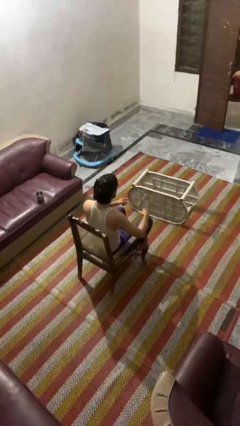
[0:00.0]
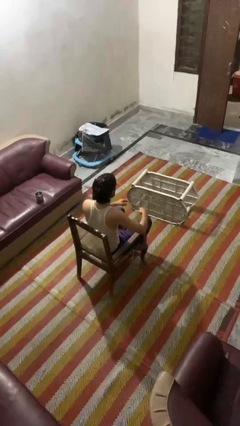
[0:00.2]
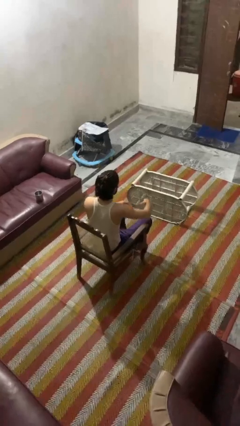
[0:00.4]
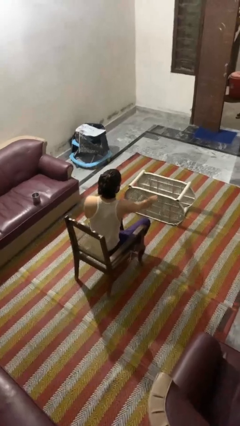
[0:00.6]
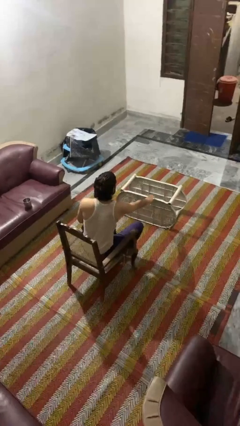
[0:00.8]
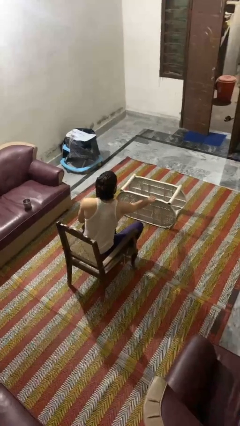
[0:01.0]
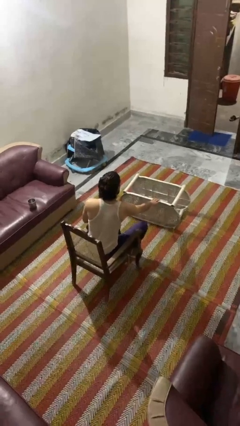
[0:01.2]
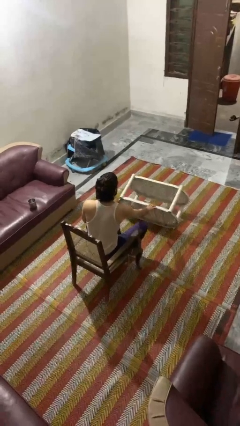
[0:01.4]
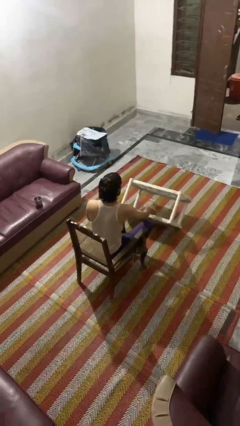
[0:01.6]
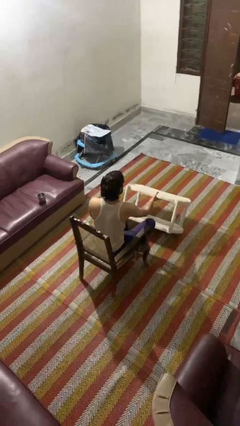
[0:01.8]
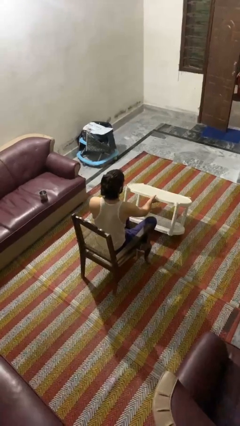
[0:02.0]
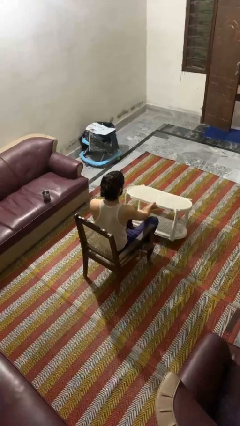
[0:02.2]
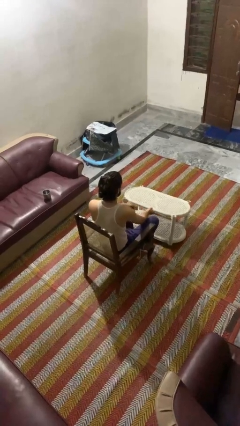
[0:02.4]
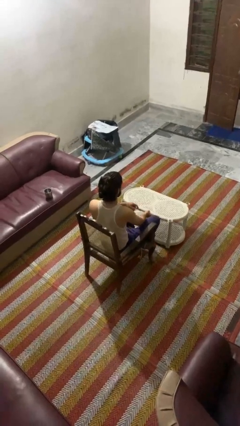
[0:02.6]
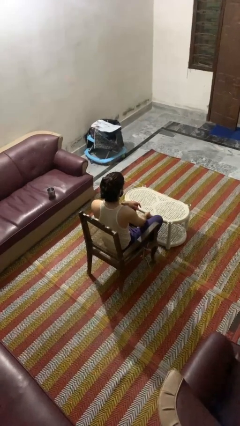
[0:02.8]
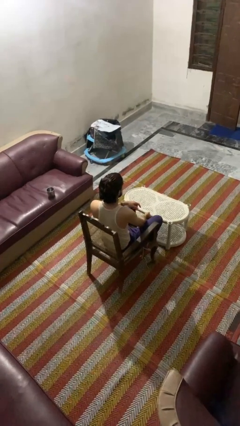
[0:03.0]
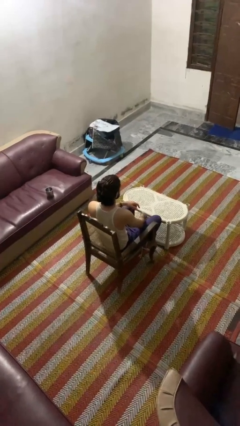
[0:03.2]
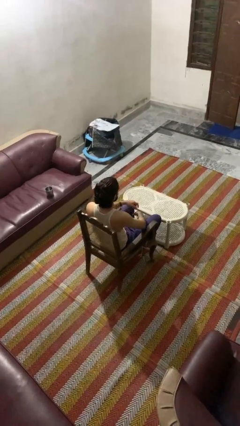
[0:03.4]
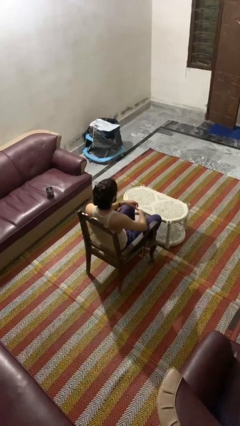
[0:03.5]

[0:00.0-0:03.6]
person sets upright furniture

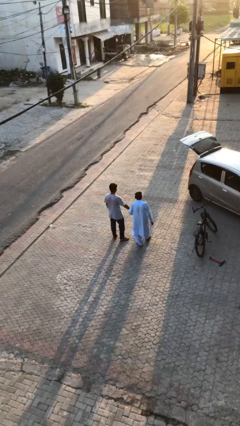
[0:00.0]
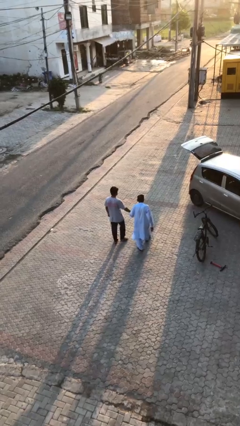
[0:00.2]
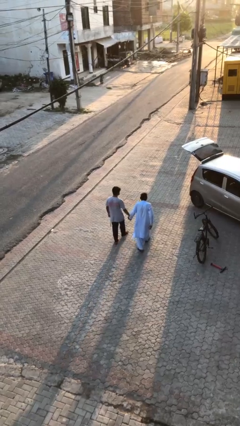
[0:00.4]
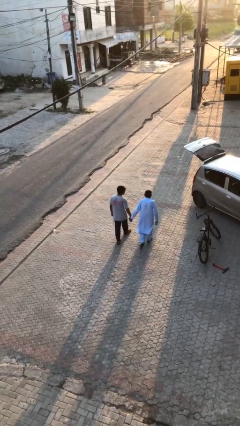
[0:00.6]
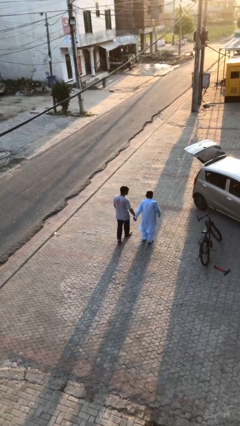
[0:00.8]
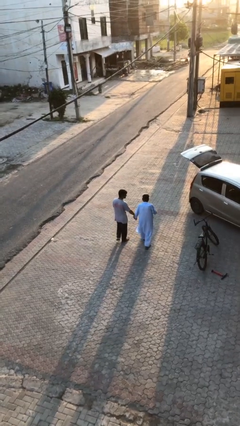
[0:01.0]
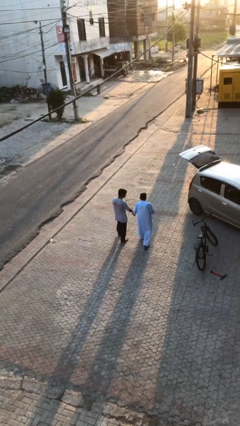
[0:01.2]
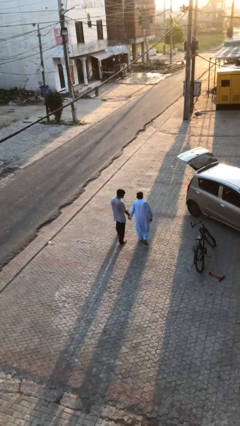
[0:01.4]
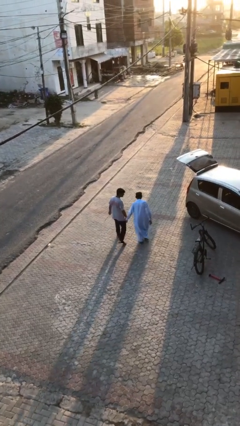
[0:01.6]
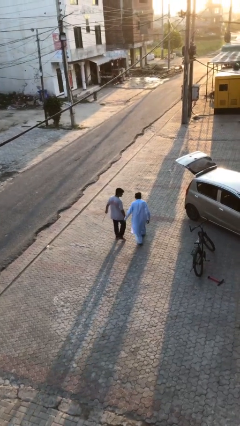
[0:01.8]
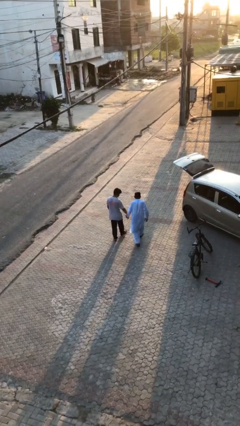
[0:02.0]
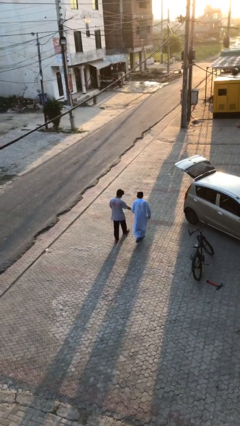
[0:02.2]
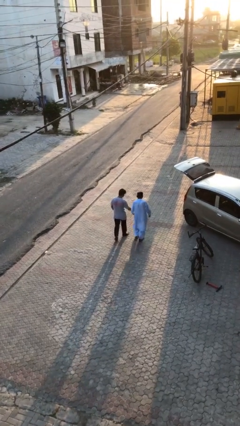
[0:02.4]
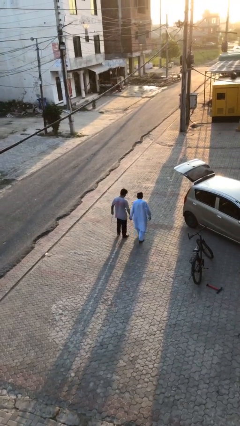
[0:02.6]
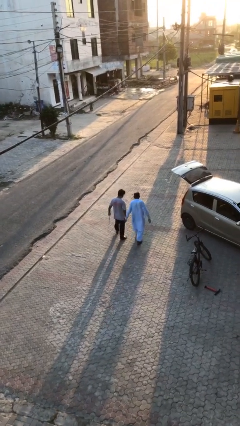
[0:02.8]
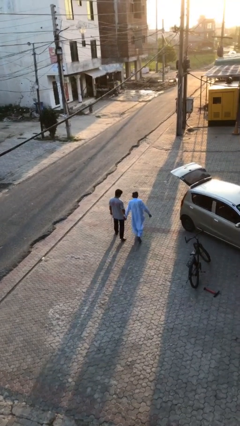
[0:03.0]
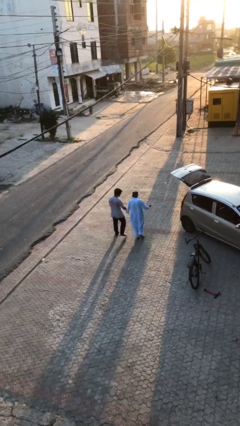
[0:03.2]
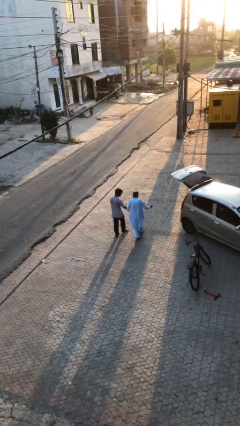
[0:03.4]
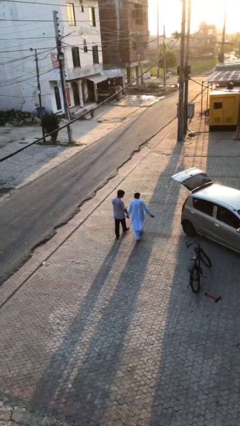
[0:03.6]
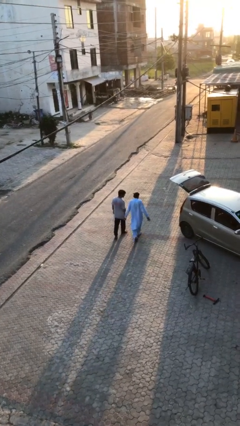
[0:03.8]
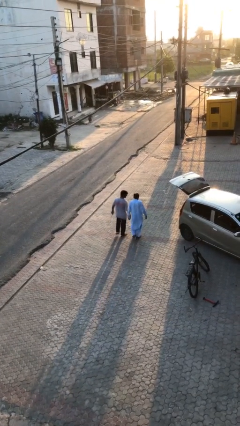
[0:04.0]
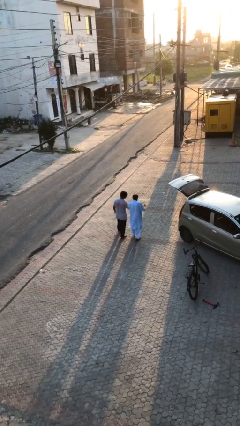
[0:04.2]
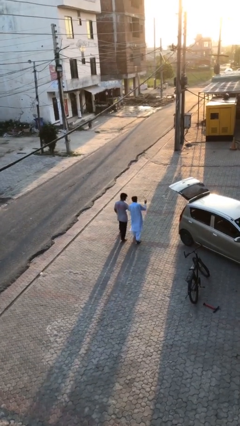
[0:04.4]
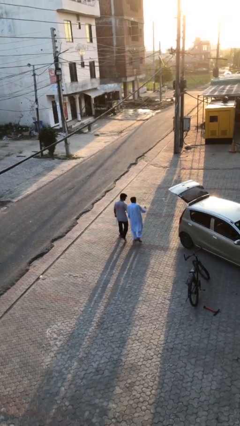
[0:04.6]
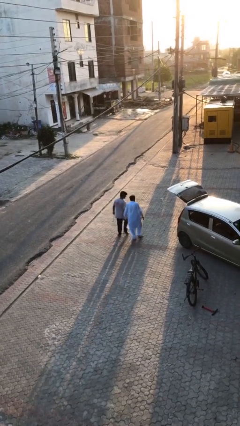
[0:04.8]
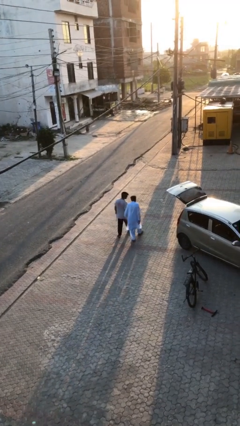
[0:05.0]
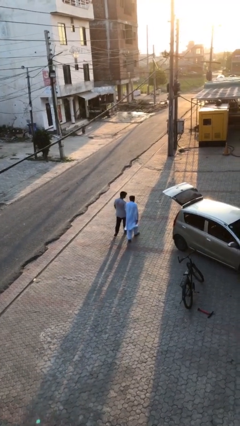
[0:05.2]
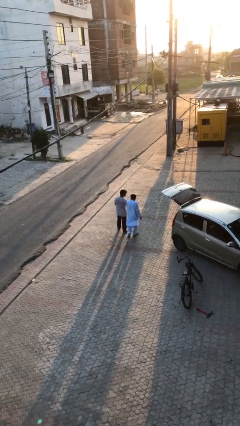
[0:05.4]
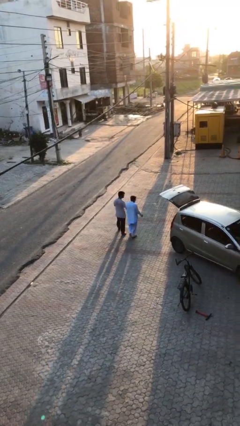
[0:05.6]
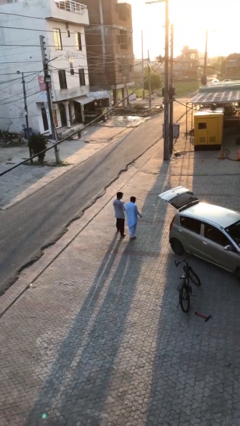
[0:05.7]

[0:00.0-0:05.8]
person holds hand

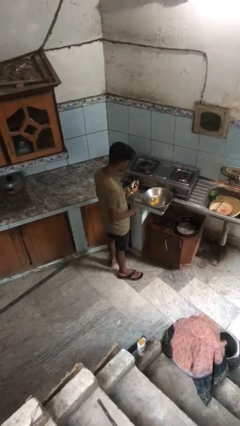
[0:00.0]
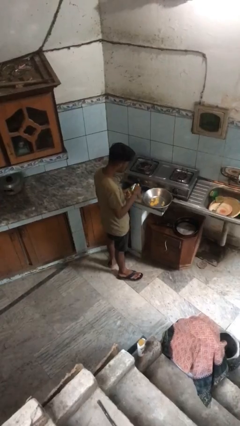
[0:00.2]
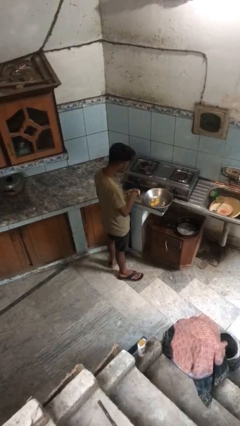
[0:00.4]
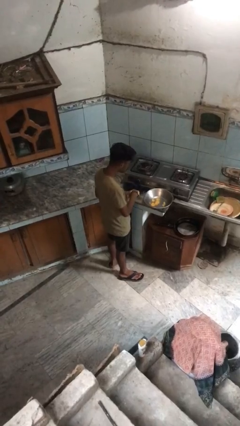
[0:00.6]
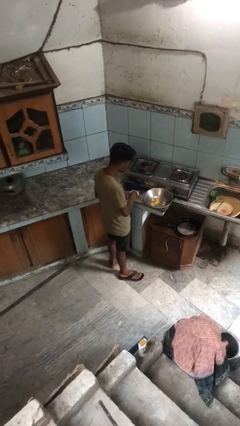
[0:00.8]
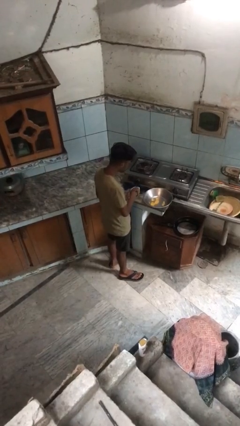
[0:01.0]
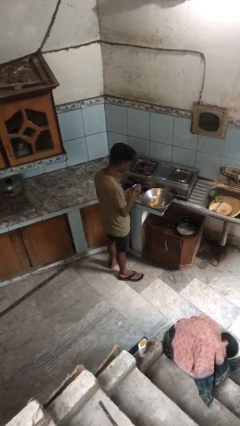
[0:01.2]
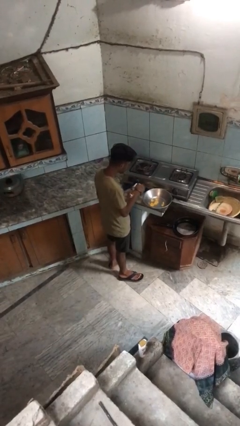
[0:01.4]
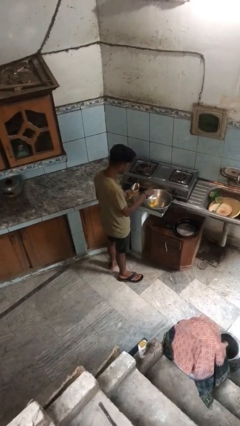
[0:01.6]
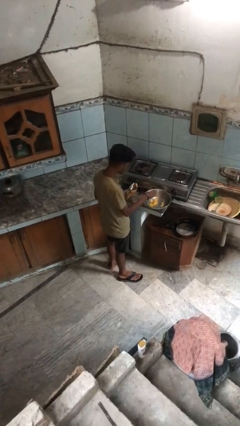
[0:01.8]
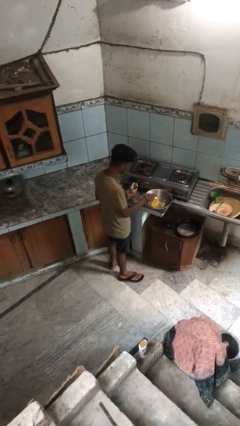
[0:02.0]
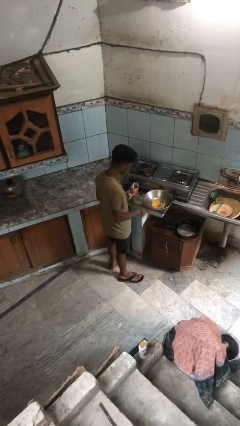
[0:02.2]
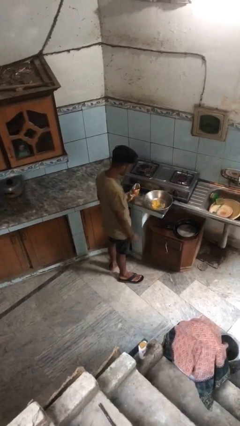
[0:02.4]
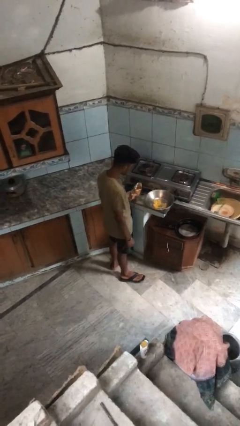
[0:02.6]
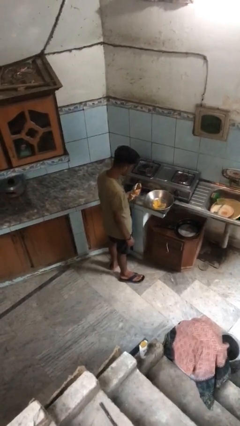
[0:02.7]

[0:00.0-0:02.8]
person pours into bowl

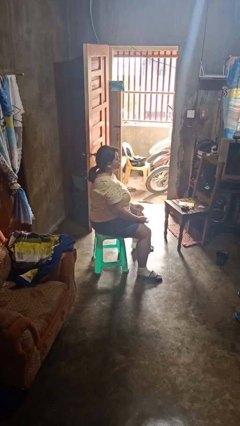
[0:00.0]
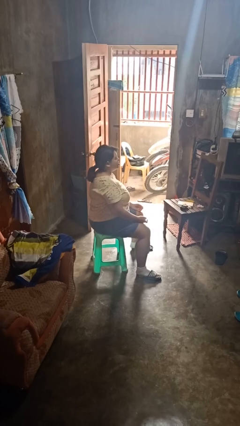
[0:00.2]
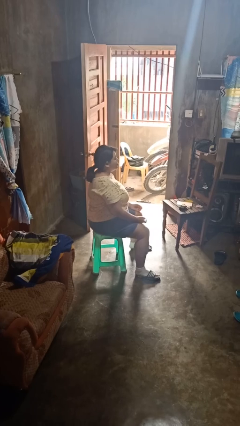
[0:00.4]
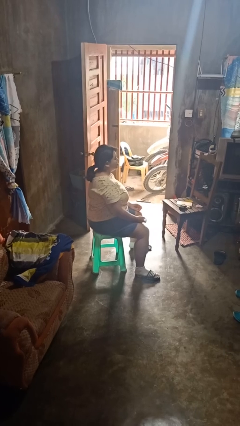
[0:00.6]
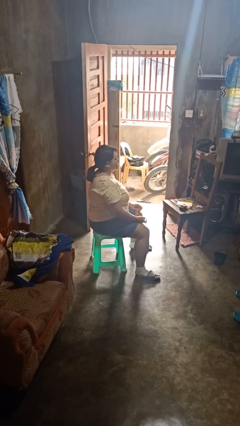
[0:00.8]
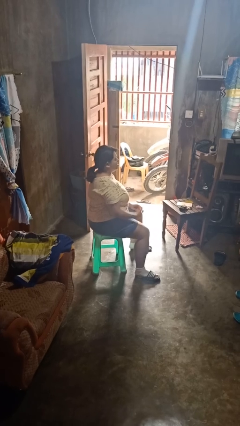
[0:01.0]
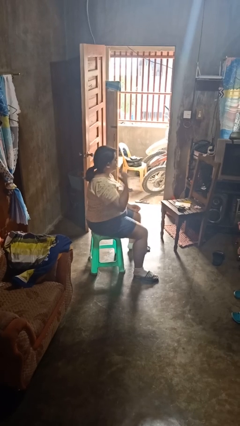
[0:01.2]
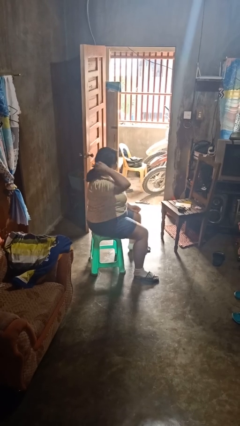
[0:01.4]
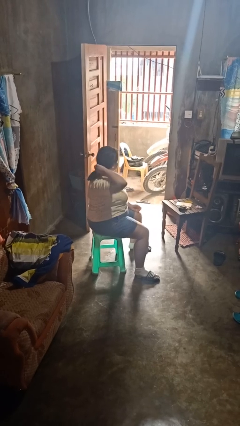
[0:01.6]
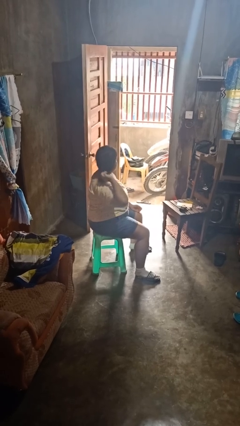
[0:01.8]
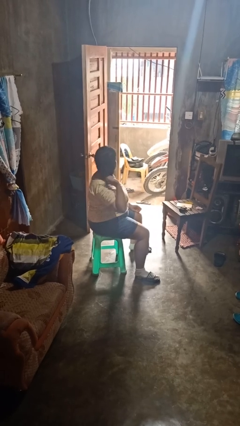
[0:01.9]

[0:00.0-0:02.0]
person takes off hairtie

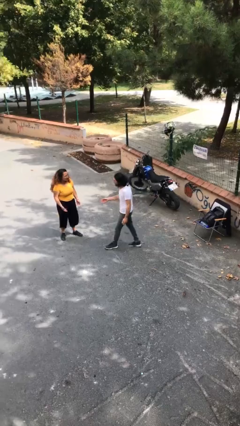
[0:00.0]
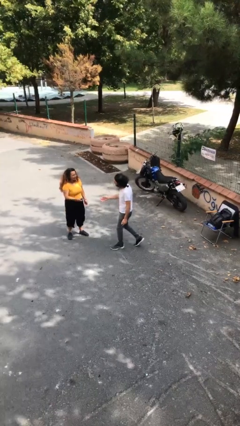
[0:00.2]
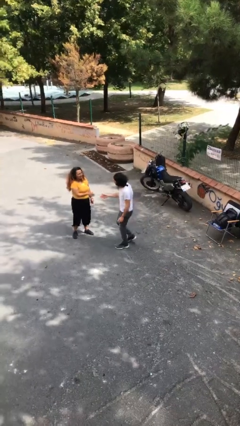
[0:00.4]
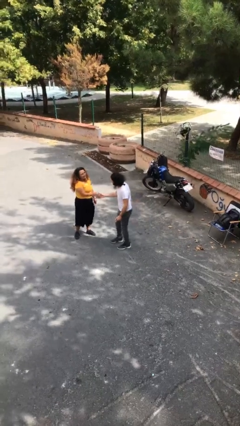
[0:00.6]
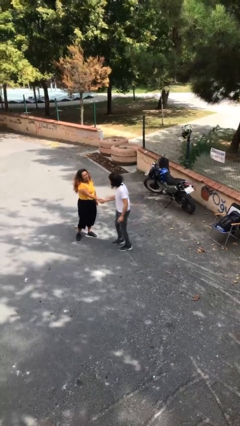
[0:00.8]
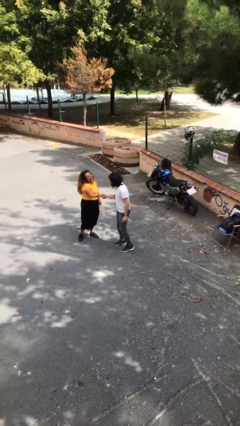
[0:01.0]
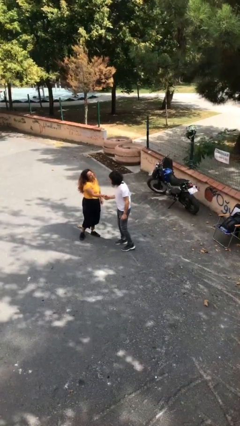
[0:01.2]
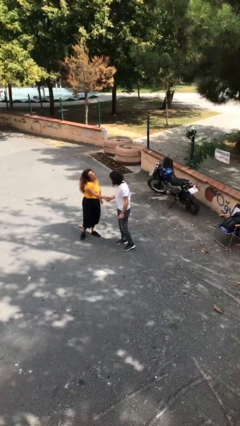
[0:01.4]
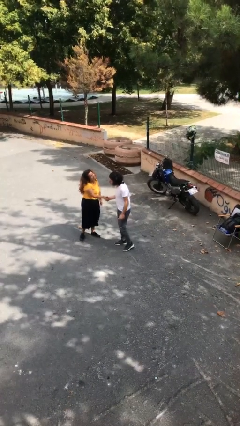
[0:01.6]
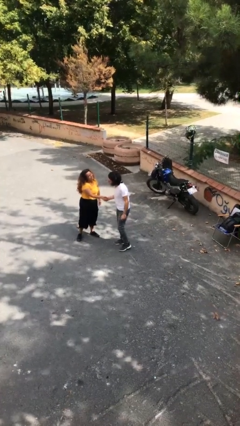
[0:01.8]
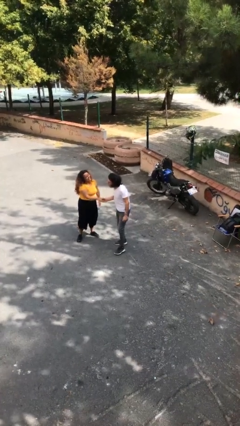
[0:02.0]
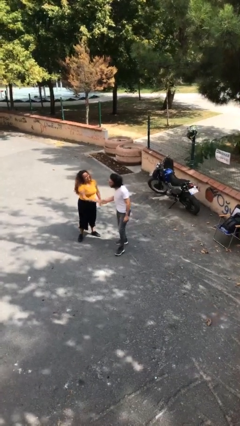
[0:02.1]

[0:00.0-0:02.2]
person shakes hand

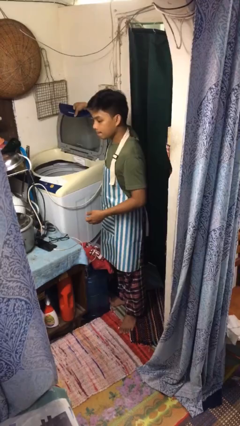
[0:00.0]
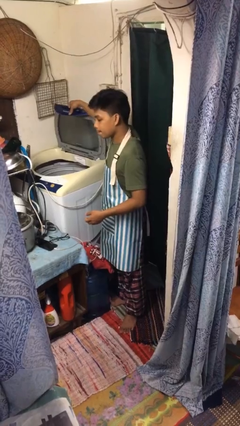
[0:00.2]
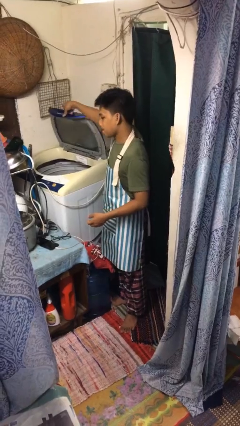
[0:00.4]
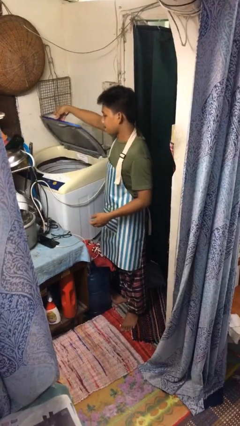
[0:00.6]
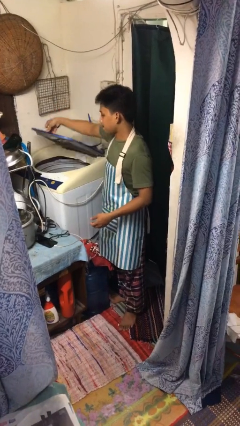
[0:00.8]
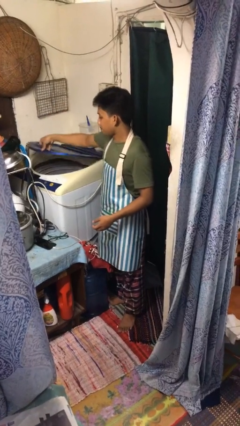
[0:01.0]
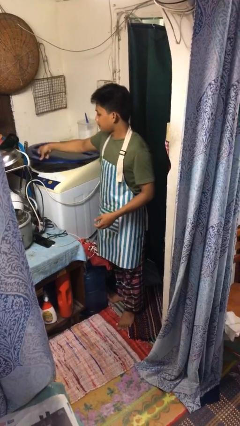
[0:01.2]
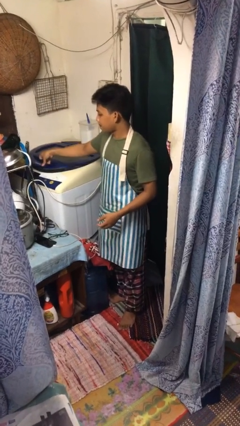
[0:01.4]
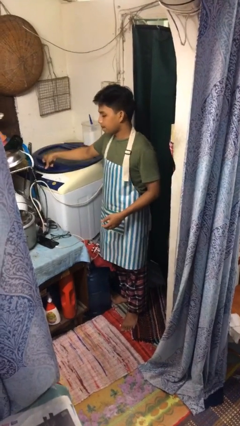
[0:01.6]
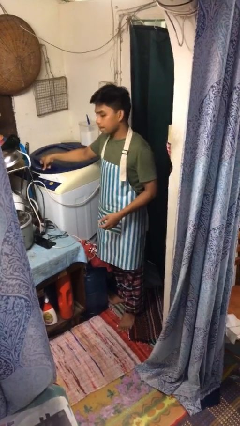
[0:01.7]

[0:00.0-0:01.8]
person closes clothes washer
